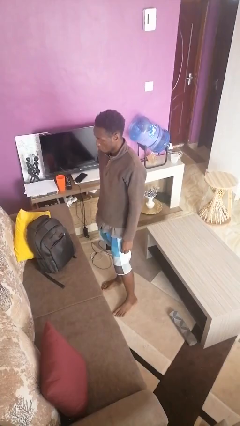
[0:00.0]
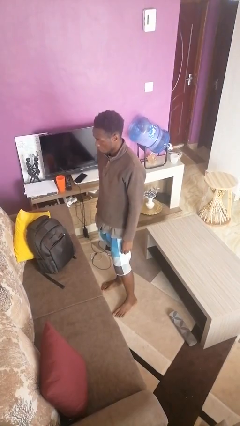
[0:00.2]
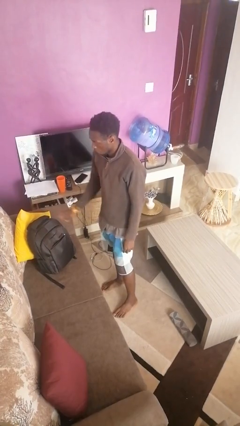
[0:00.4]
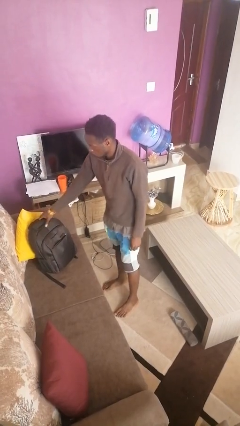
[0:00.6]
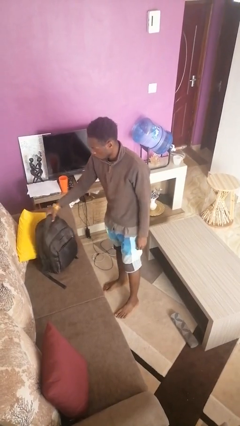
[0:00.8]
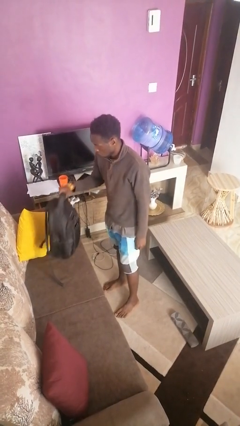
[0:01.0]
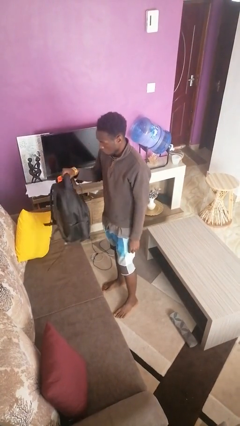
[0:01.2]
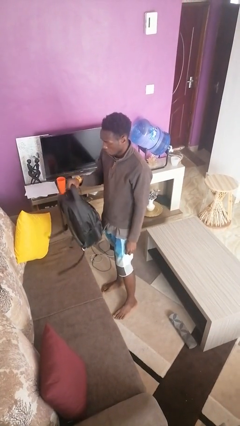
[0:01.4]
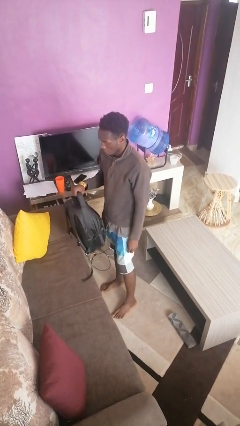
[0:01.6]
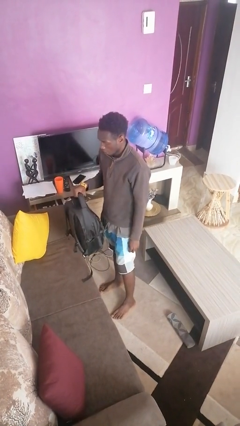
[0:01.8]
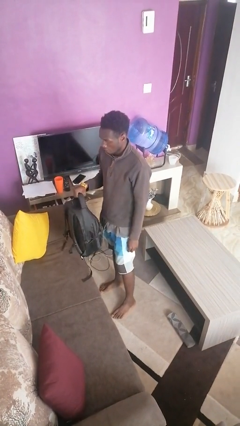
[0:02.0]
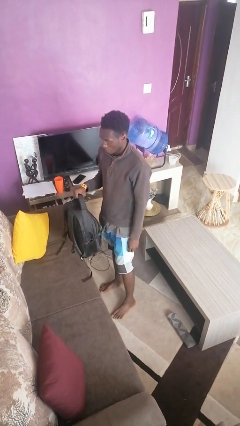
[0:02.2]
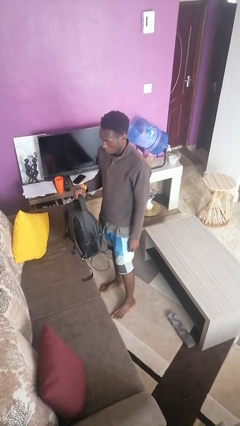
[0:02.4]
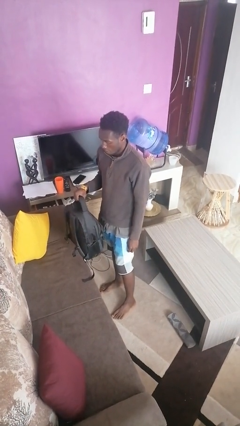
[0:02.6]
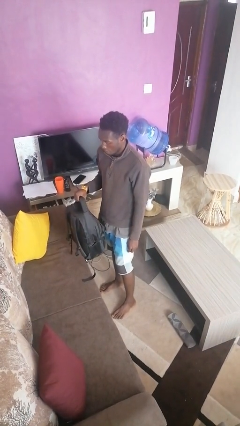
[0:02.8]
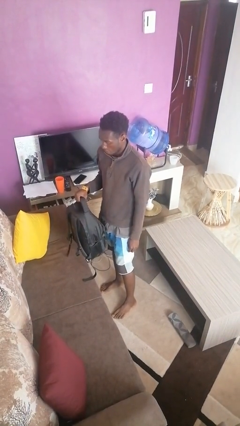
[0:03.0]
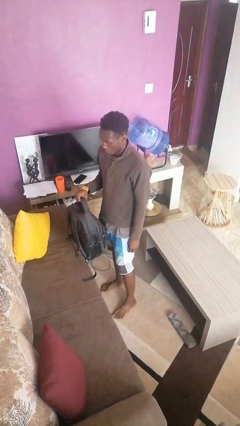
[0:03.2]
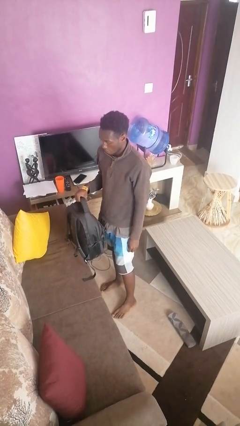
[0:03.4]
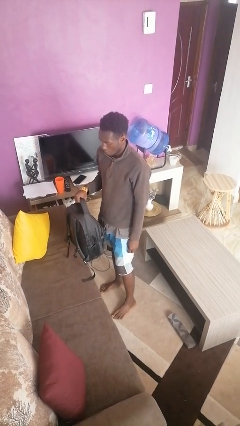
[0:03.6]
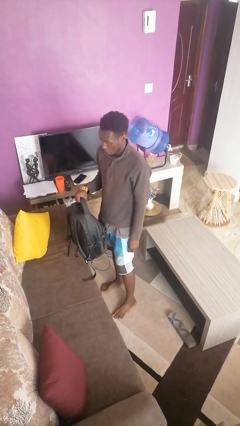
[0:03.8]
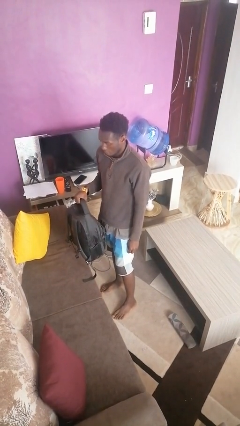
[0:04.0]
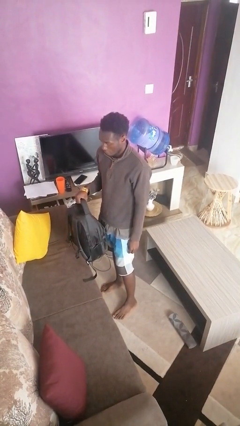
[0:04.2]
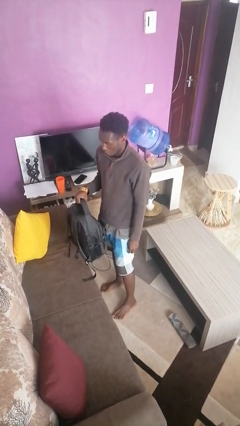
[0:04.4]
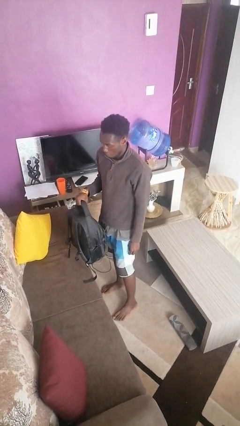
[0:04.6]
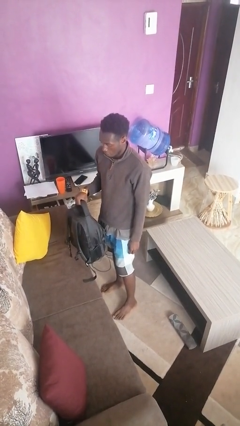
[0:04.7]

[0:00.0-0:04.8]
person picks up object from couch

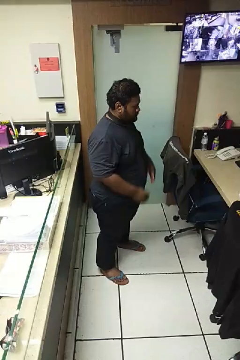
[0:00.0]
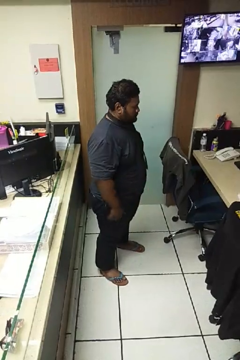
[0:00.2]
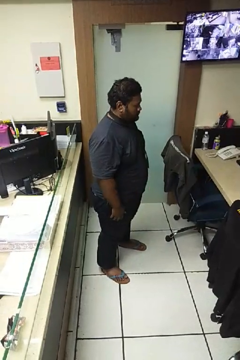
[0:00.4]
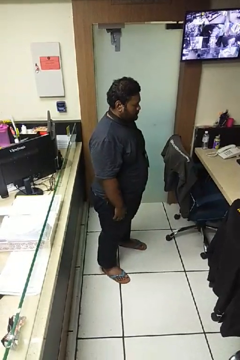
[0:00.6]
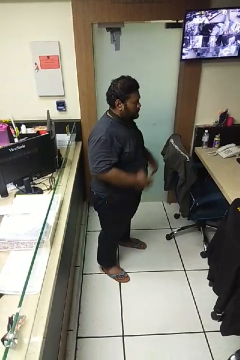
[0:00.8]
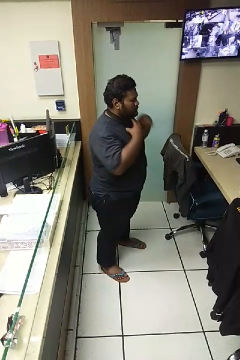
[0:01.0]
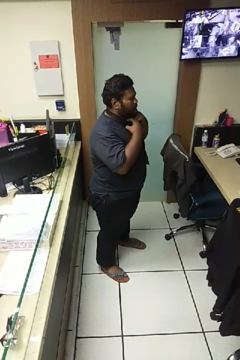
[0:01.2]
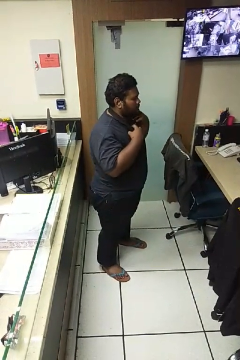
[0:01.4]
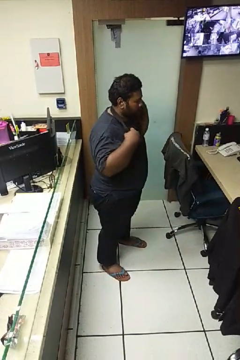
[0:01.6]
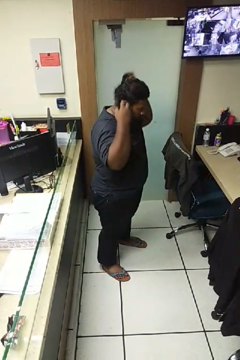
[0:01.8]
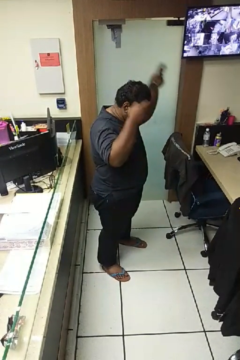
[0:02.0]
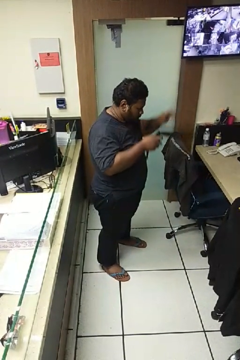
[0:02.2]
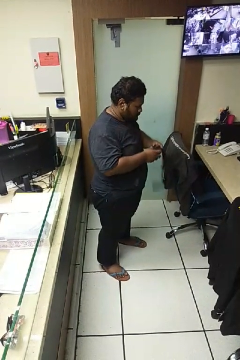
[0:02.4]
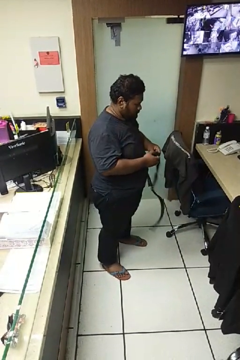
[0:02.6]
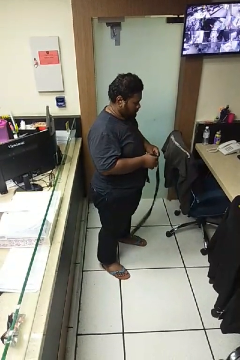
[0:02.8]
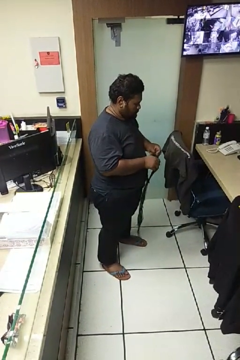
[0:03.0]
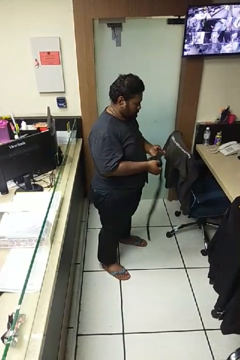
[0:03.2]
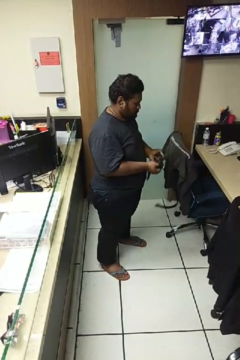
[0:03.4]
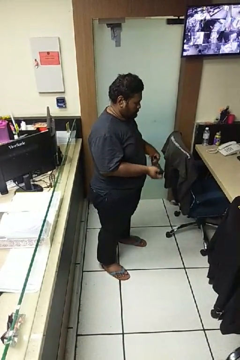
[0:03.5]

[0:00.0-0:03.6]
person takes off necktie

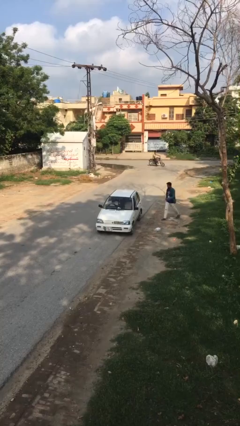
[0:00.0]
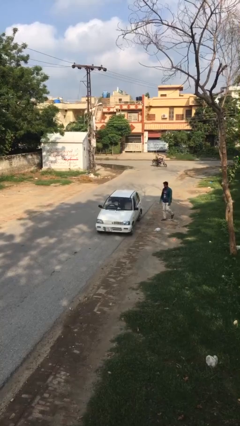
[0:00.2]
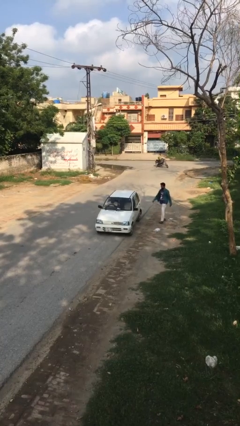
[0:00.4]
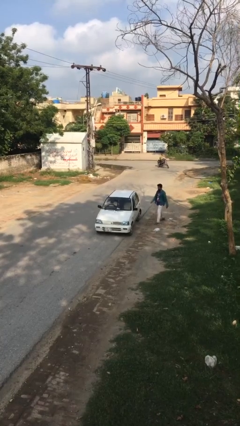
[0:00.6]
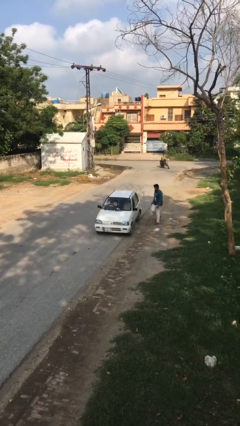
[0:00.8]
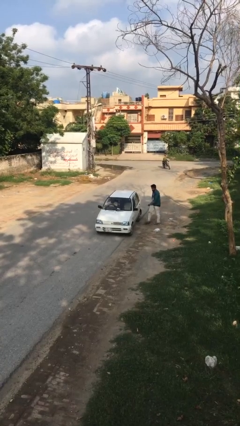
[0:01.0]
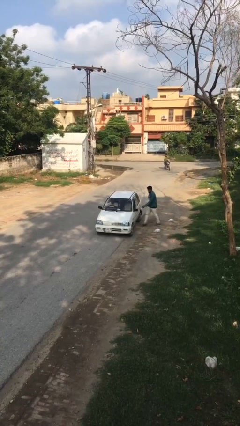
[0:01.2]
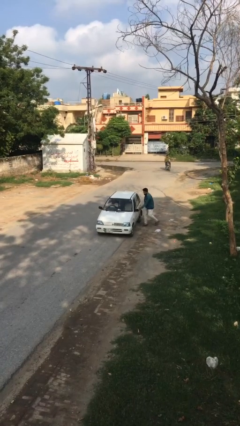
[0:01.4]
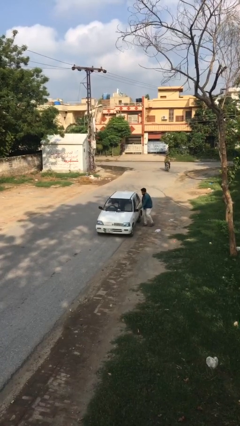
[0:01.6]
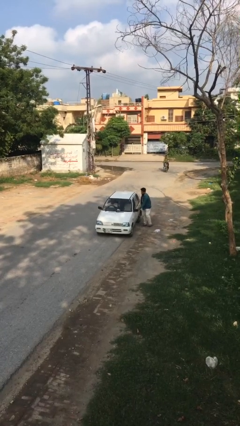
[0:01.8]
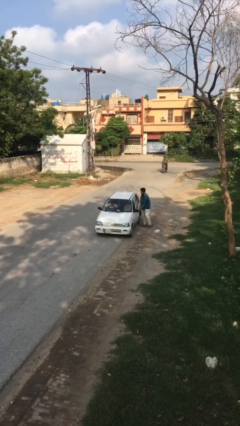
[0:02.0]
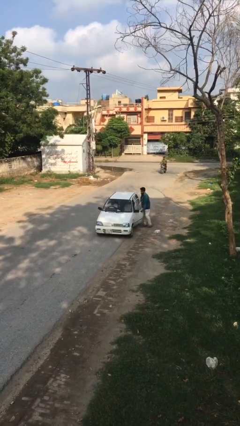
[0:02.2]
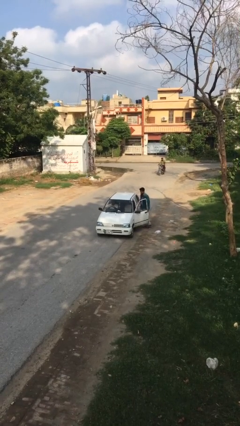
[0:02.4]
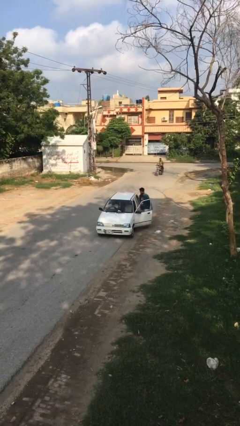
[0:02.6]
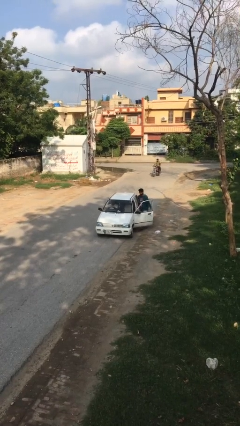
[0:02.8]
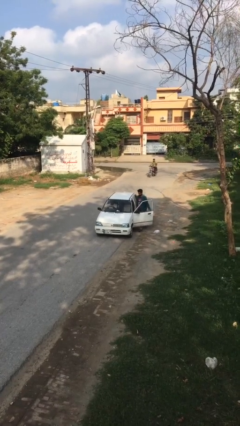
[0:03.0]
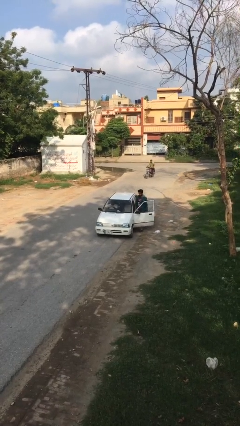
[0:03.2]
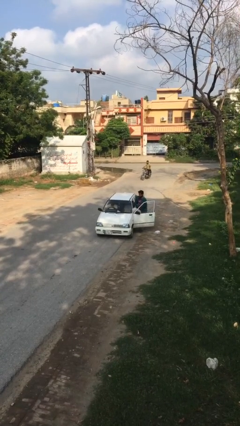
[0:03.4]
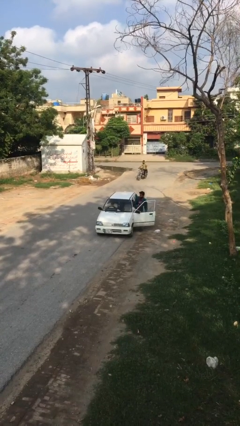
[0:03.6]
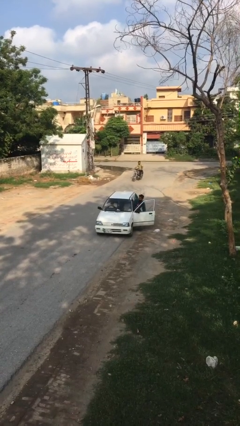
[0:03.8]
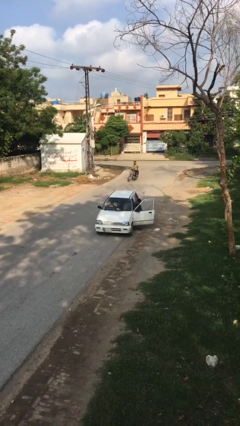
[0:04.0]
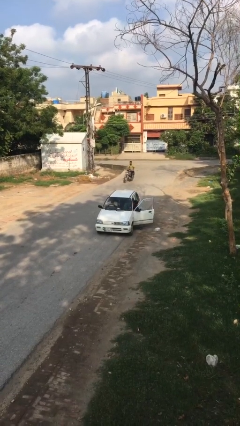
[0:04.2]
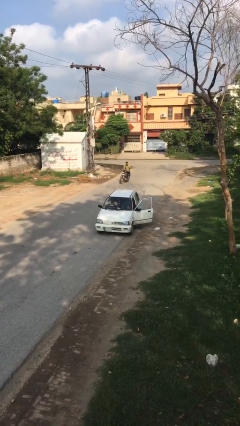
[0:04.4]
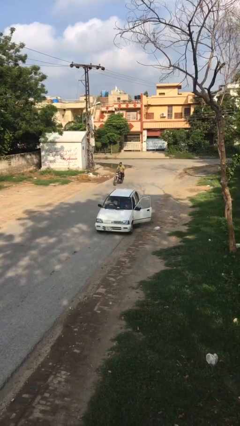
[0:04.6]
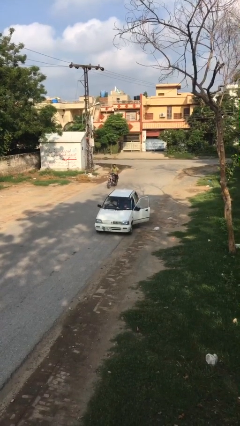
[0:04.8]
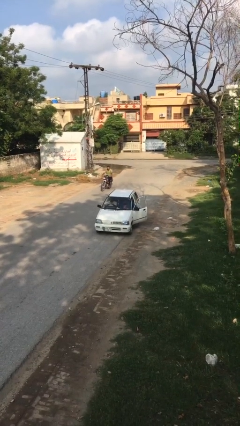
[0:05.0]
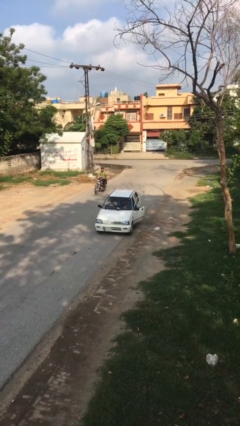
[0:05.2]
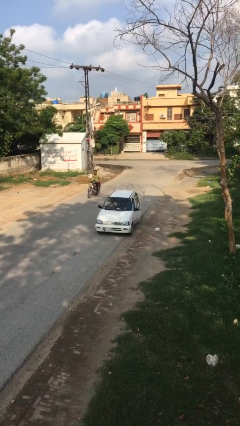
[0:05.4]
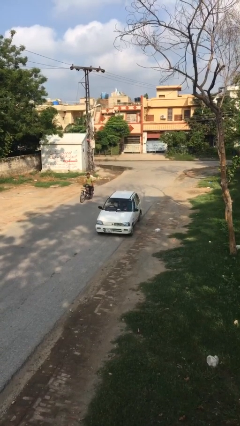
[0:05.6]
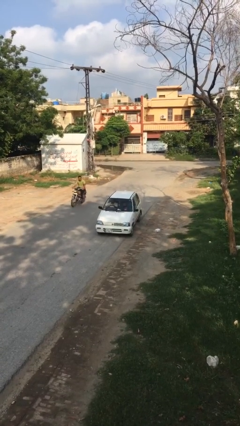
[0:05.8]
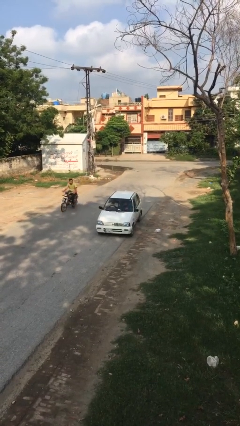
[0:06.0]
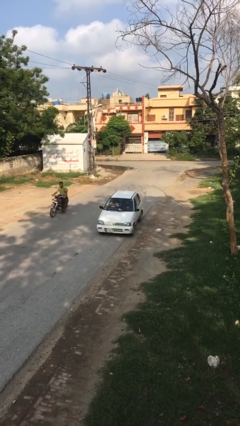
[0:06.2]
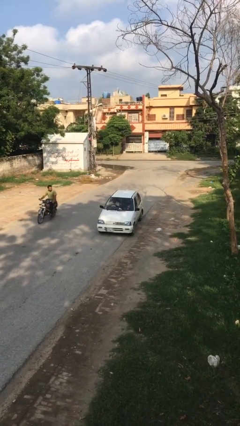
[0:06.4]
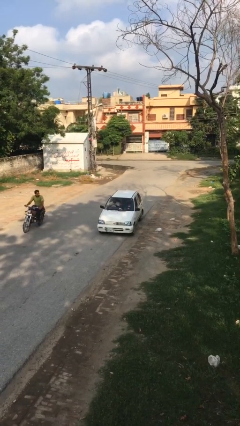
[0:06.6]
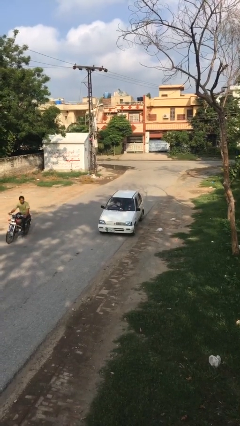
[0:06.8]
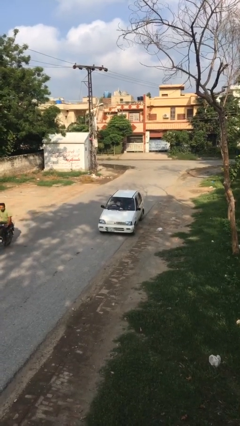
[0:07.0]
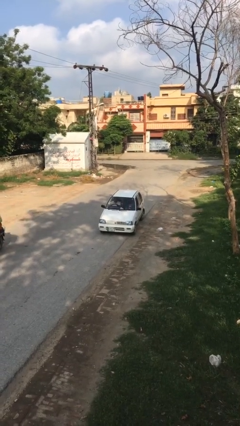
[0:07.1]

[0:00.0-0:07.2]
car picks up person

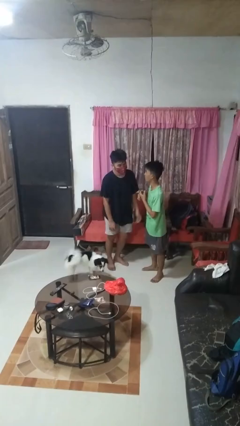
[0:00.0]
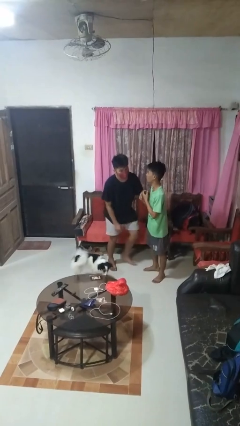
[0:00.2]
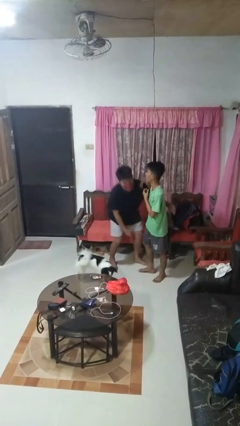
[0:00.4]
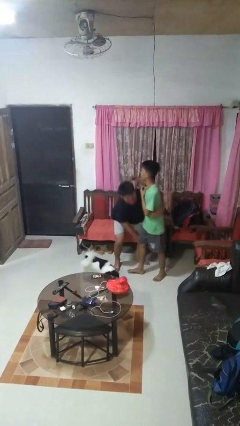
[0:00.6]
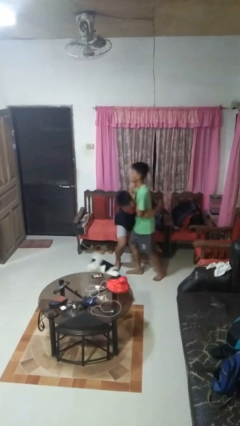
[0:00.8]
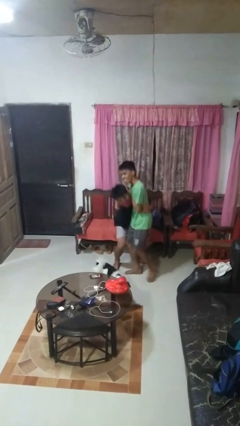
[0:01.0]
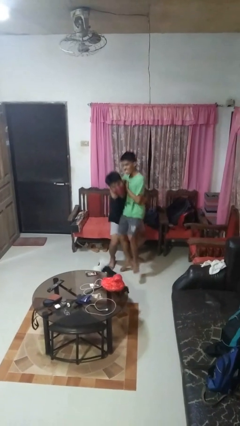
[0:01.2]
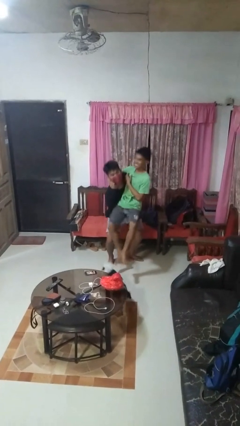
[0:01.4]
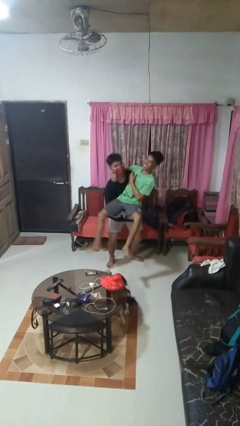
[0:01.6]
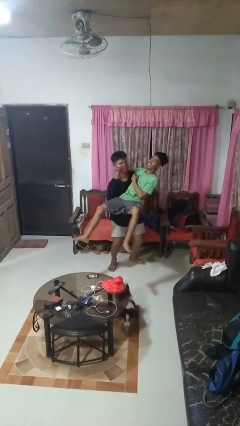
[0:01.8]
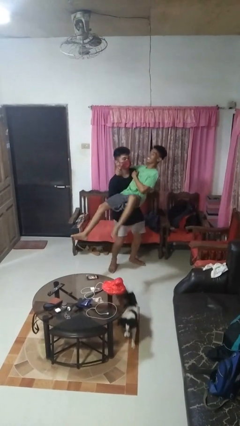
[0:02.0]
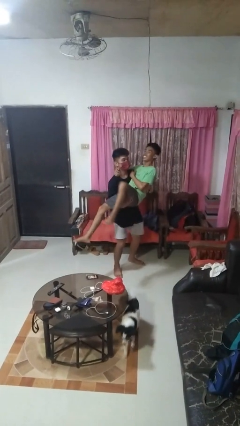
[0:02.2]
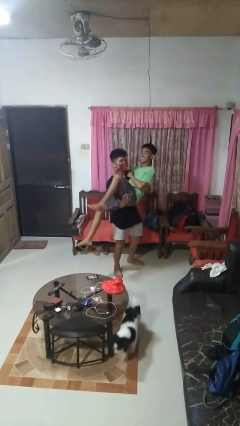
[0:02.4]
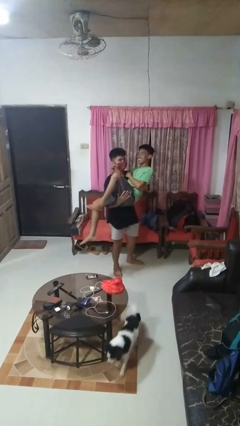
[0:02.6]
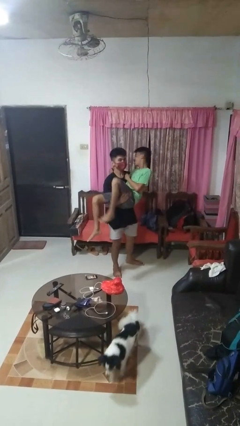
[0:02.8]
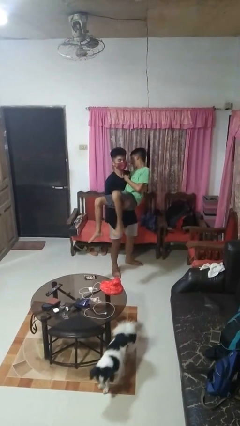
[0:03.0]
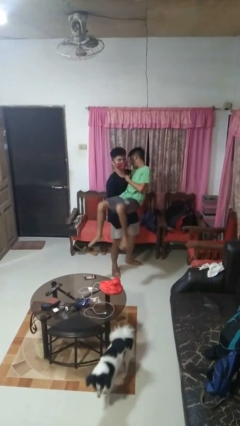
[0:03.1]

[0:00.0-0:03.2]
person picks up person
